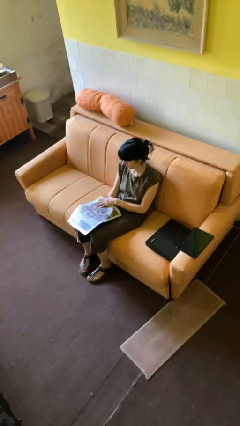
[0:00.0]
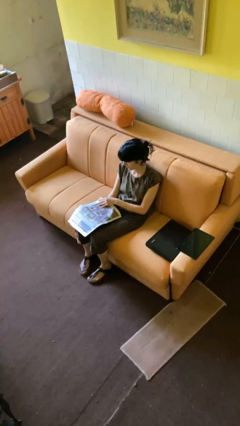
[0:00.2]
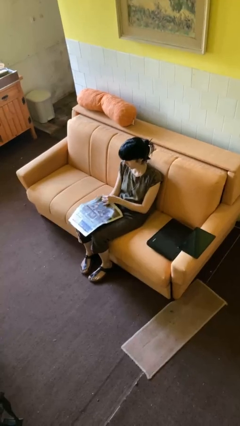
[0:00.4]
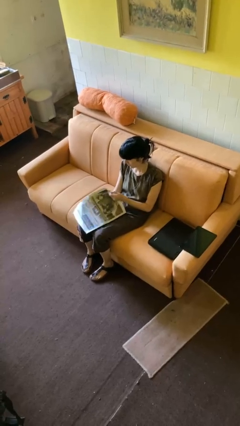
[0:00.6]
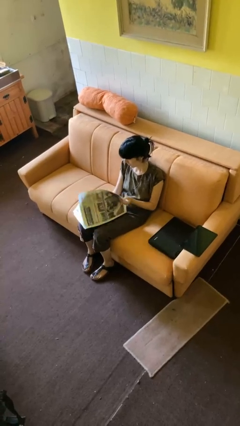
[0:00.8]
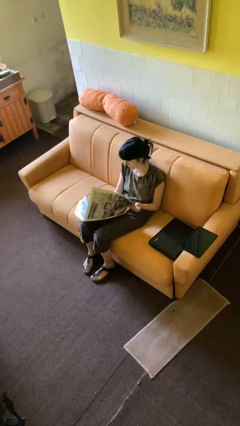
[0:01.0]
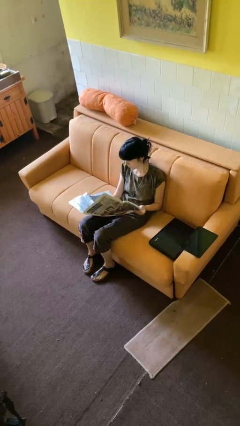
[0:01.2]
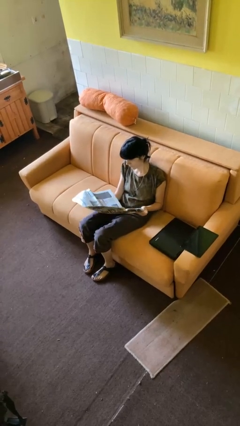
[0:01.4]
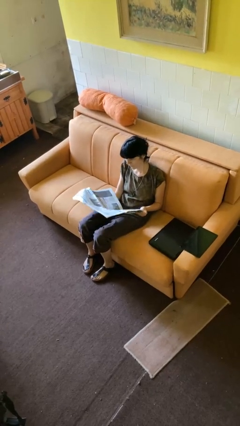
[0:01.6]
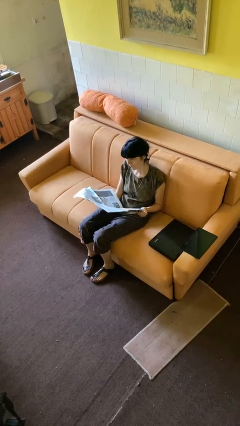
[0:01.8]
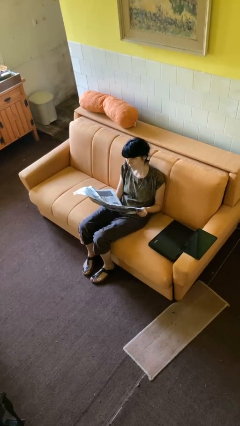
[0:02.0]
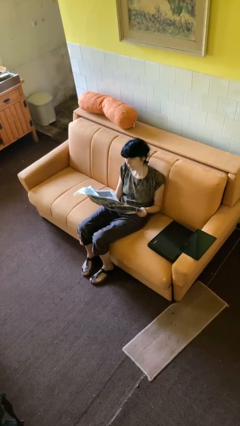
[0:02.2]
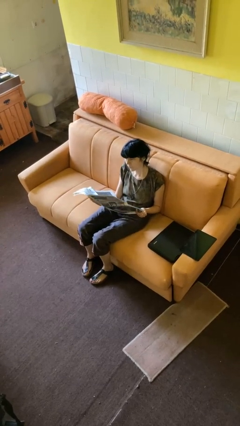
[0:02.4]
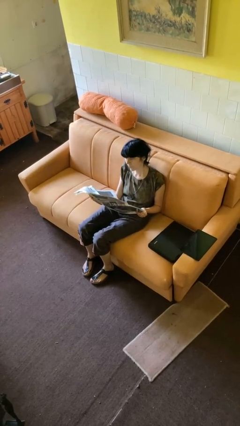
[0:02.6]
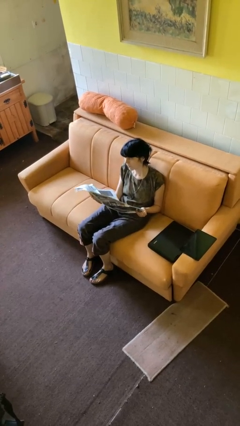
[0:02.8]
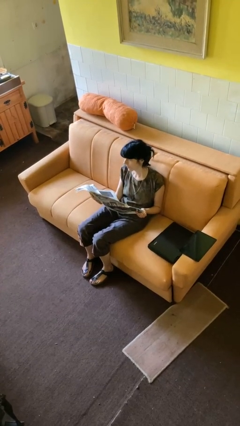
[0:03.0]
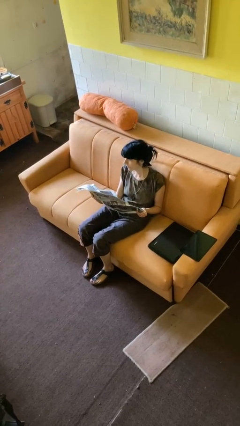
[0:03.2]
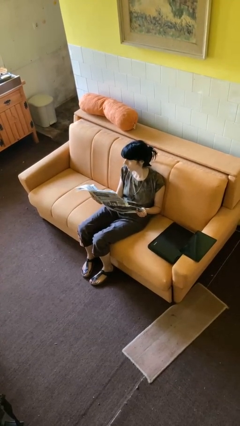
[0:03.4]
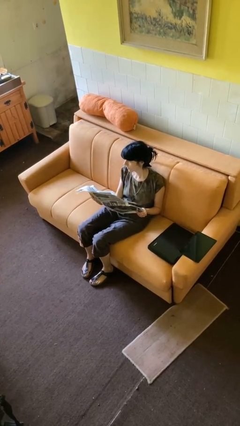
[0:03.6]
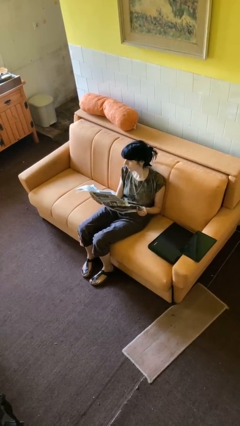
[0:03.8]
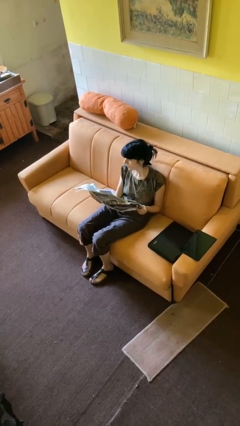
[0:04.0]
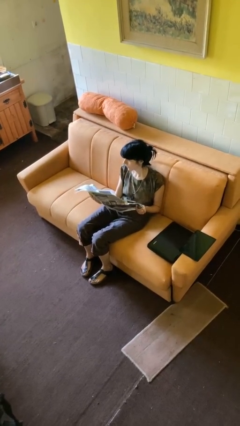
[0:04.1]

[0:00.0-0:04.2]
person reads newspaper

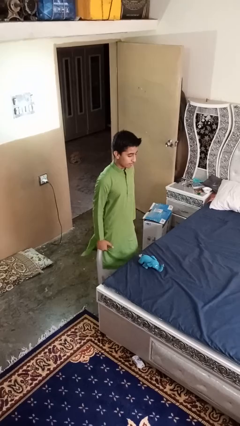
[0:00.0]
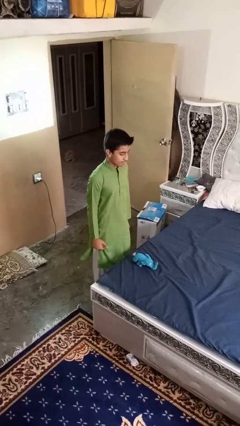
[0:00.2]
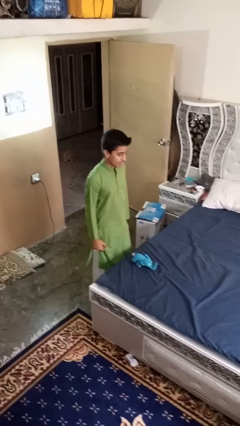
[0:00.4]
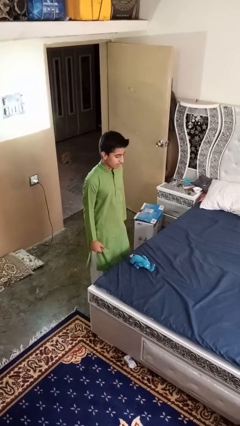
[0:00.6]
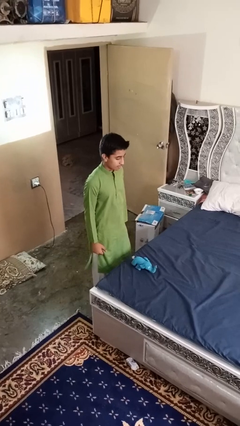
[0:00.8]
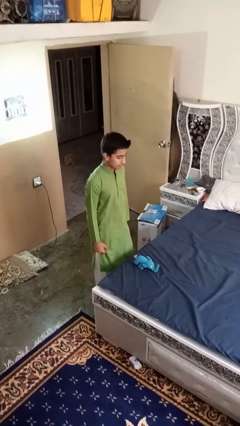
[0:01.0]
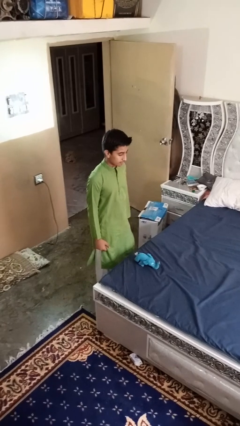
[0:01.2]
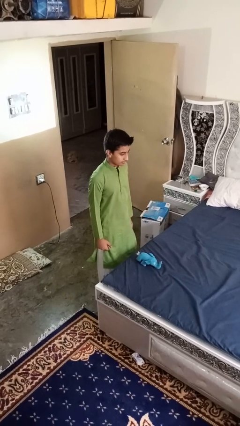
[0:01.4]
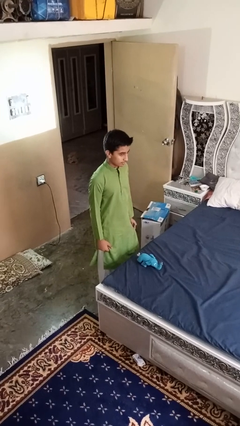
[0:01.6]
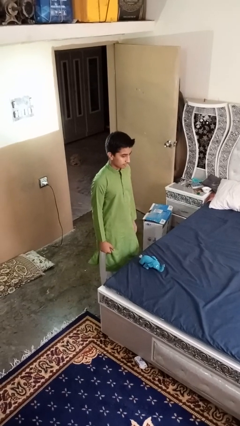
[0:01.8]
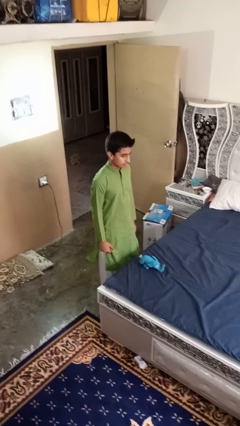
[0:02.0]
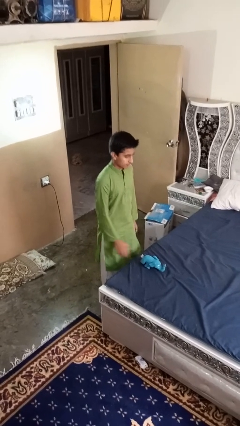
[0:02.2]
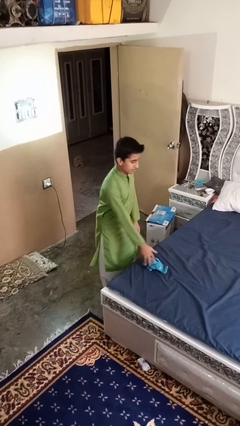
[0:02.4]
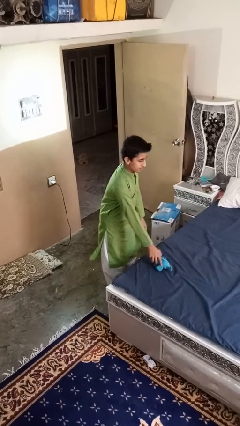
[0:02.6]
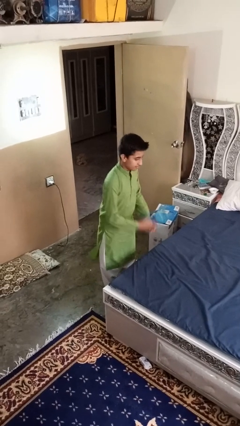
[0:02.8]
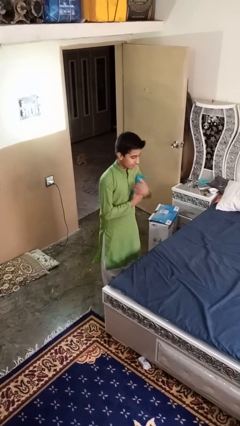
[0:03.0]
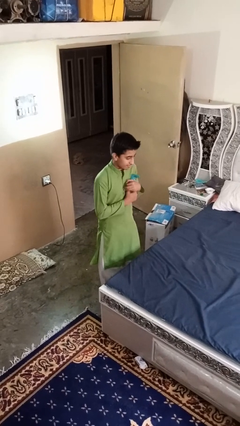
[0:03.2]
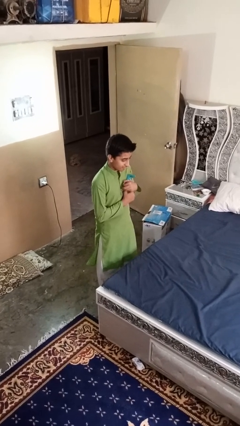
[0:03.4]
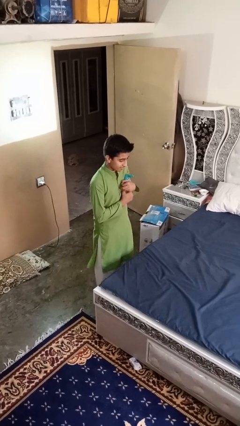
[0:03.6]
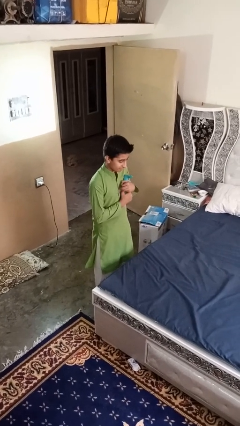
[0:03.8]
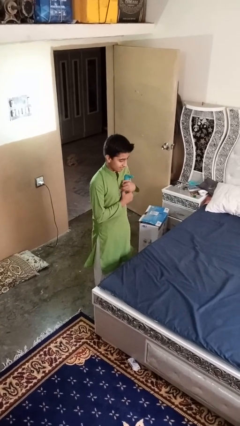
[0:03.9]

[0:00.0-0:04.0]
person hugs stuffed animal

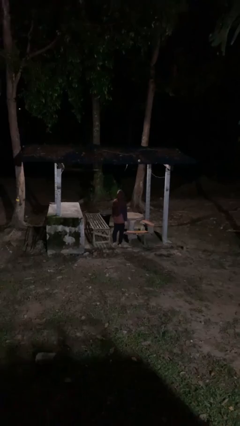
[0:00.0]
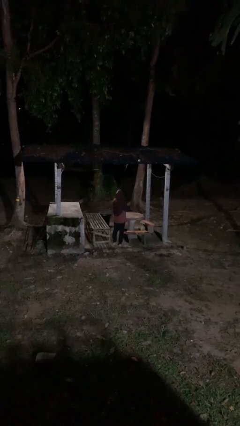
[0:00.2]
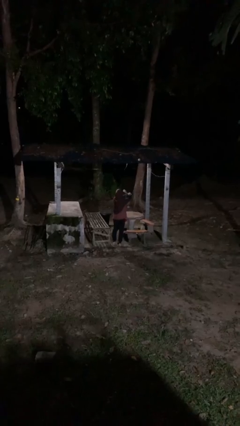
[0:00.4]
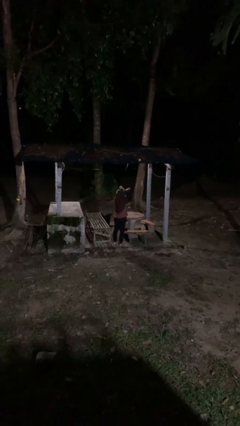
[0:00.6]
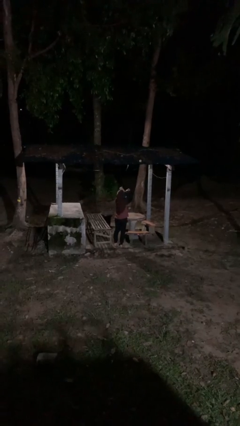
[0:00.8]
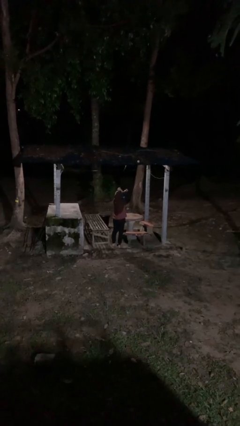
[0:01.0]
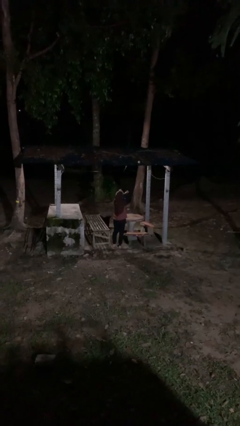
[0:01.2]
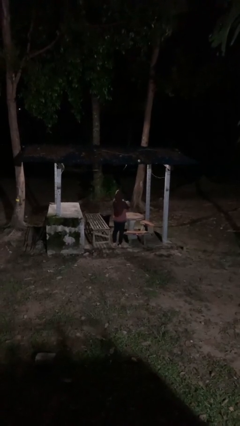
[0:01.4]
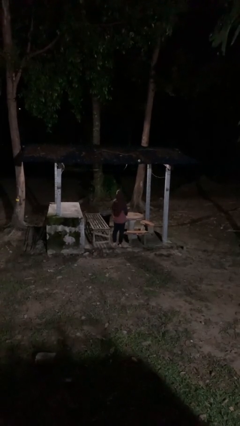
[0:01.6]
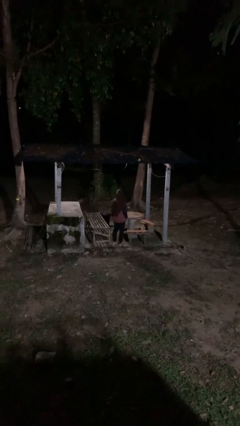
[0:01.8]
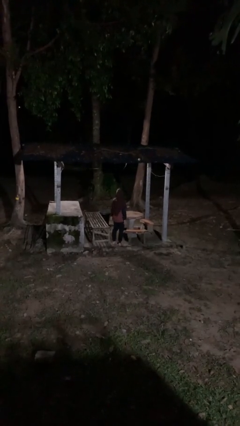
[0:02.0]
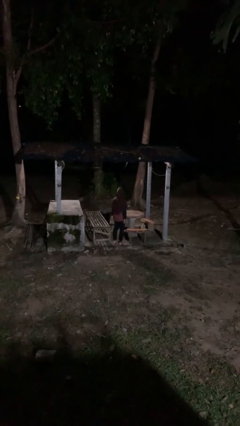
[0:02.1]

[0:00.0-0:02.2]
person gestures arms x

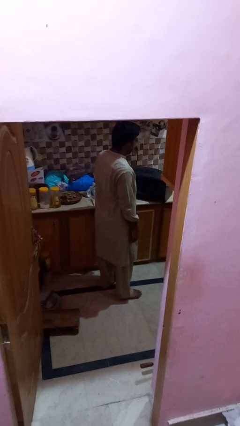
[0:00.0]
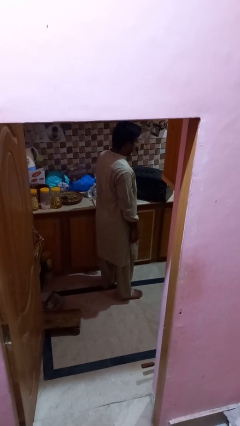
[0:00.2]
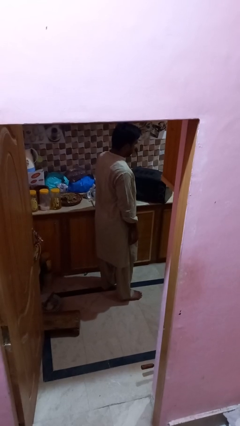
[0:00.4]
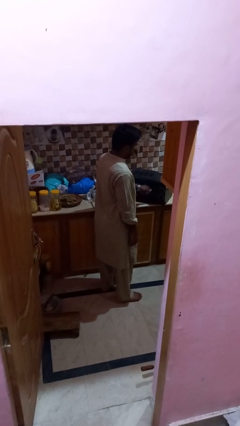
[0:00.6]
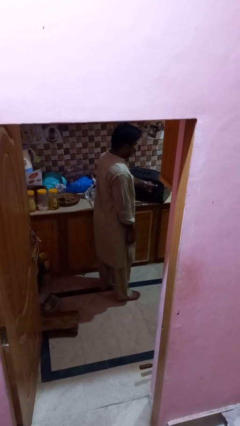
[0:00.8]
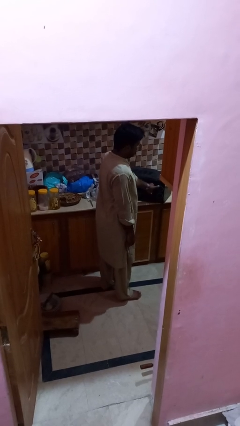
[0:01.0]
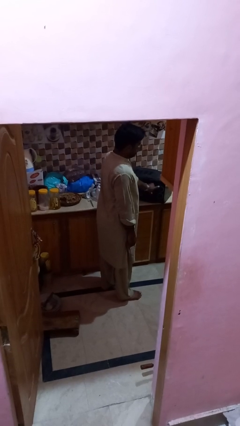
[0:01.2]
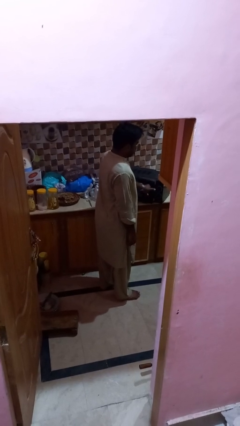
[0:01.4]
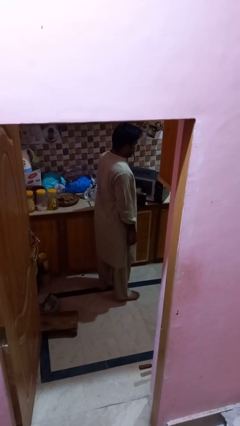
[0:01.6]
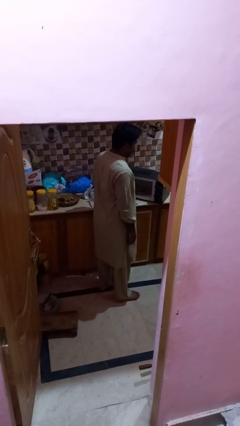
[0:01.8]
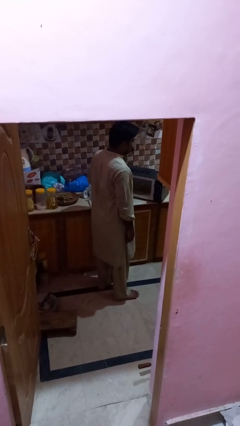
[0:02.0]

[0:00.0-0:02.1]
person opens microwave

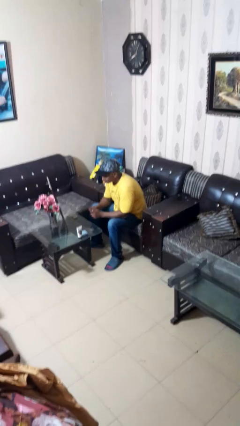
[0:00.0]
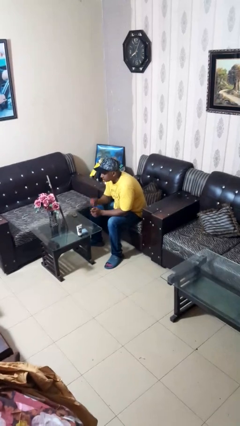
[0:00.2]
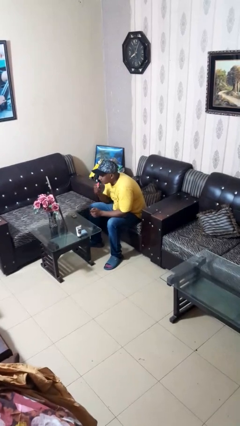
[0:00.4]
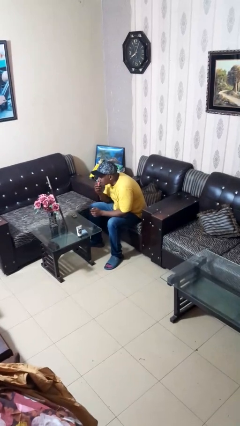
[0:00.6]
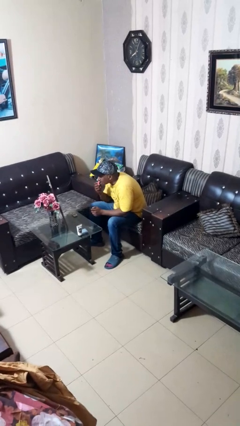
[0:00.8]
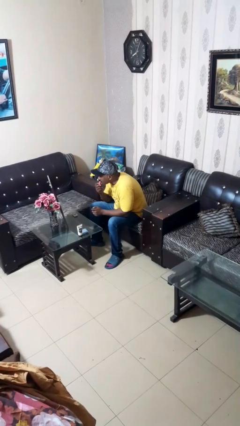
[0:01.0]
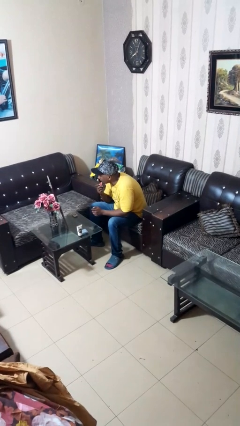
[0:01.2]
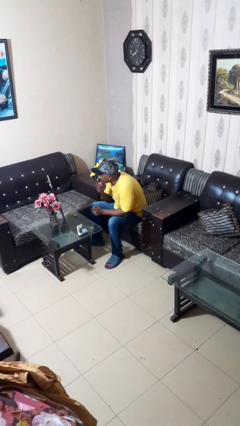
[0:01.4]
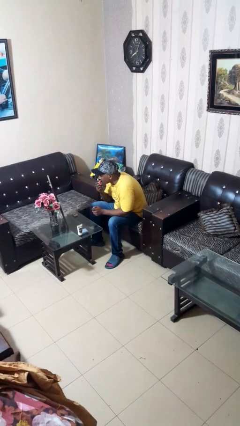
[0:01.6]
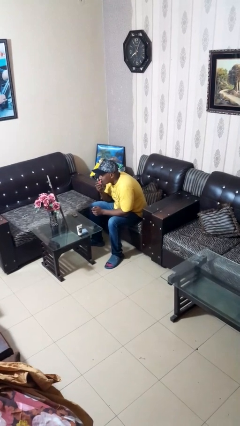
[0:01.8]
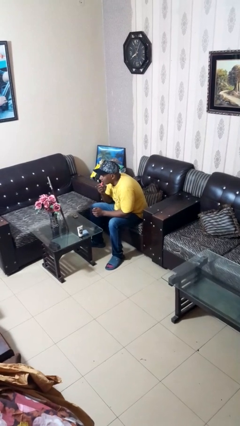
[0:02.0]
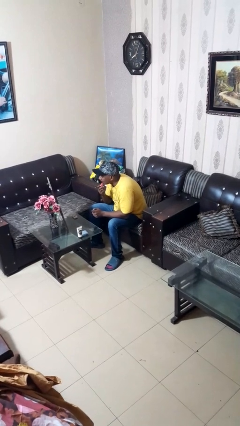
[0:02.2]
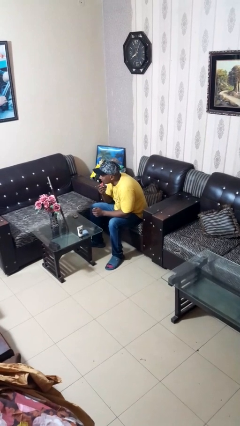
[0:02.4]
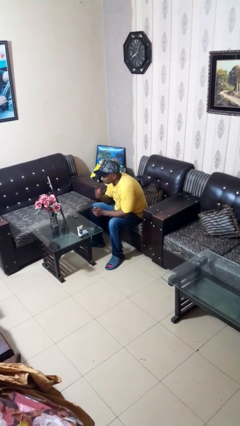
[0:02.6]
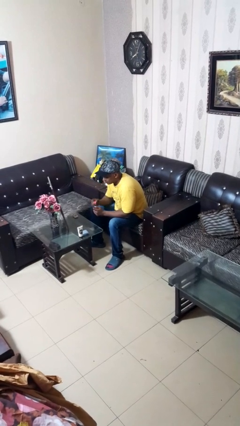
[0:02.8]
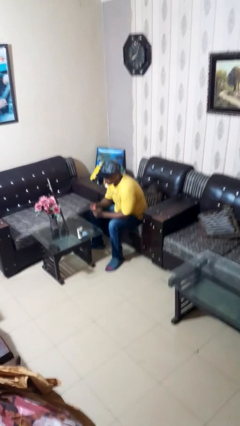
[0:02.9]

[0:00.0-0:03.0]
person applies lip makeup

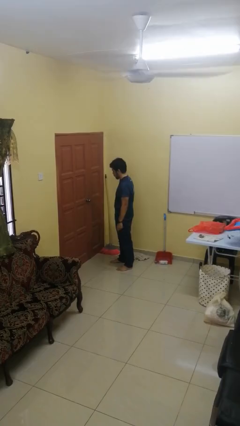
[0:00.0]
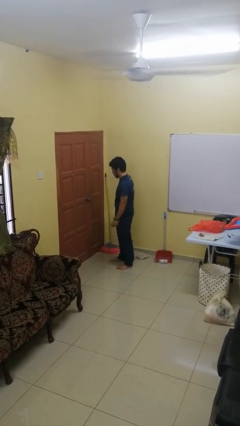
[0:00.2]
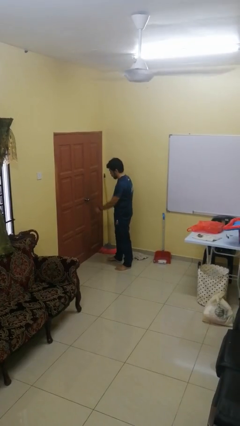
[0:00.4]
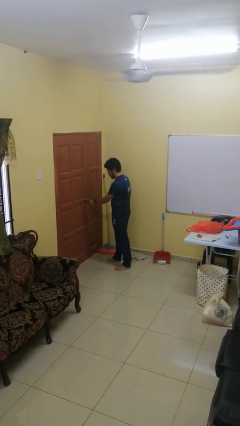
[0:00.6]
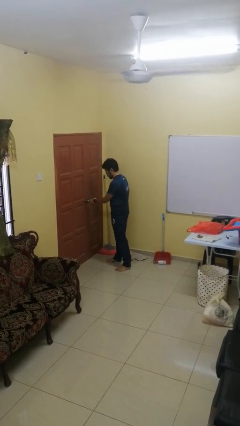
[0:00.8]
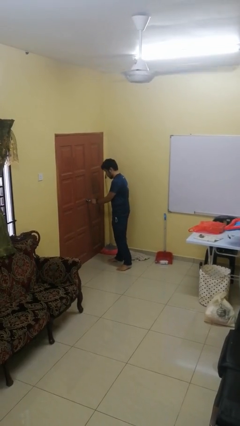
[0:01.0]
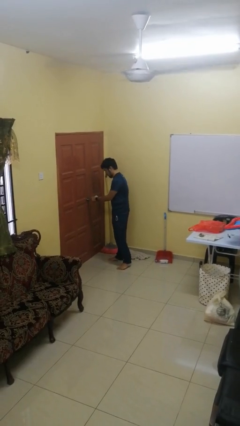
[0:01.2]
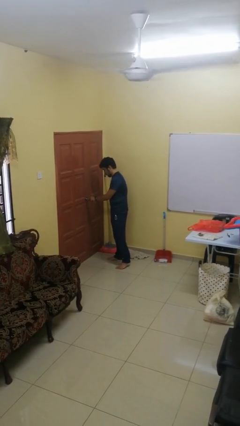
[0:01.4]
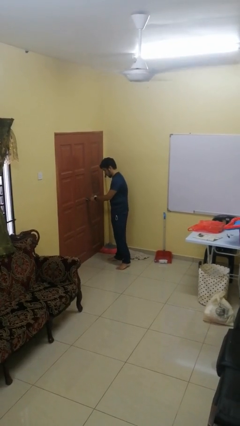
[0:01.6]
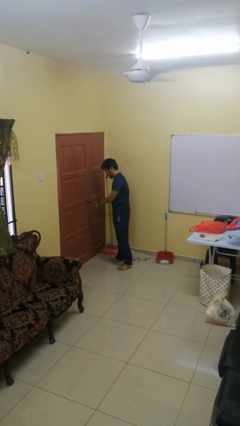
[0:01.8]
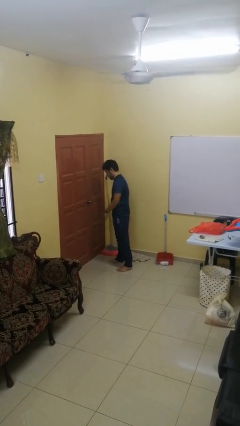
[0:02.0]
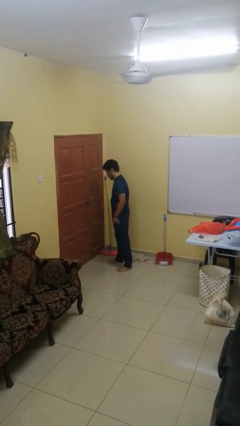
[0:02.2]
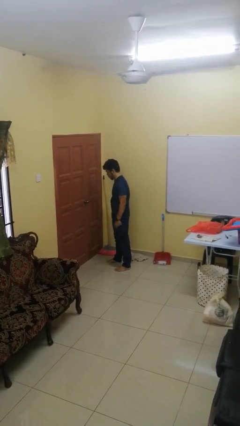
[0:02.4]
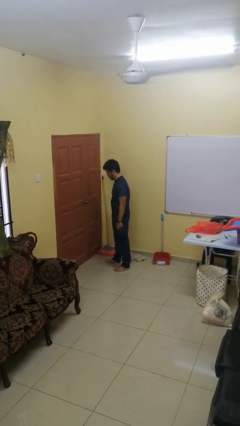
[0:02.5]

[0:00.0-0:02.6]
person locks door with keys
